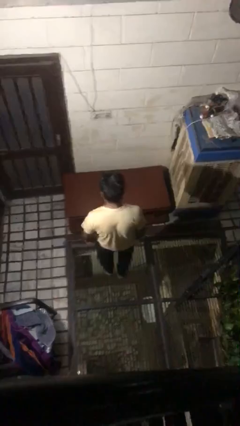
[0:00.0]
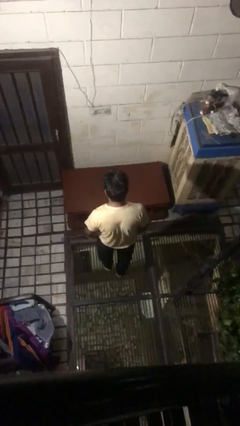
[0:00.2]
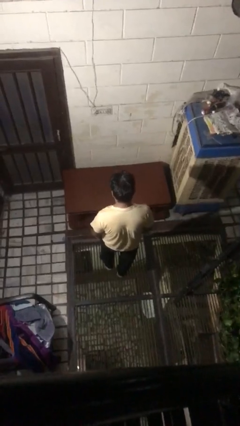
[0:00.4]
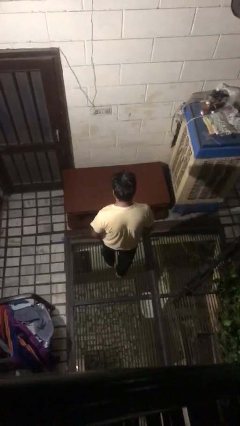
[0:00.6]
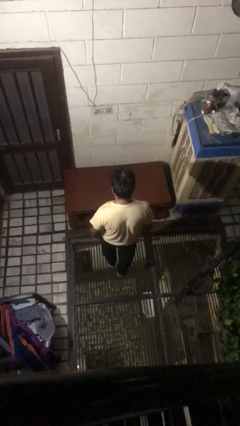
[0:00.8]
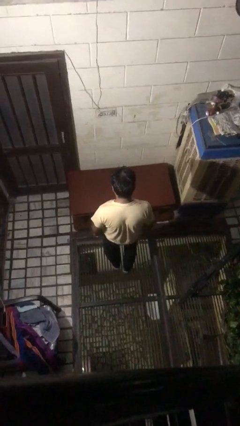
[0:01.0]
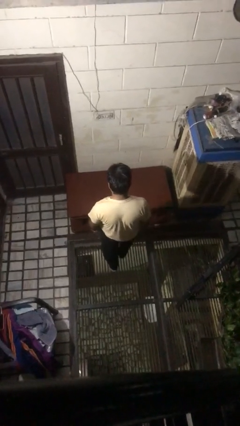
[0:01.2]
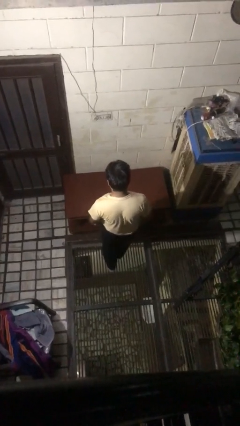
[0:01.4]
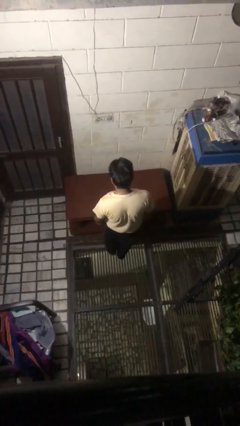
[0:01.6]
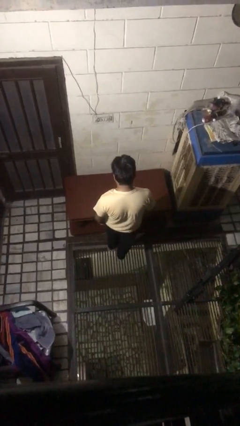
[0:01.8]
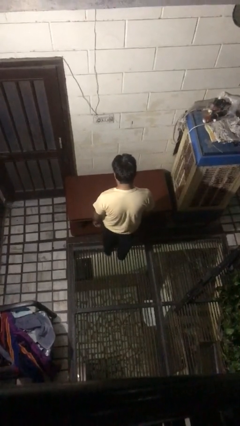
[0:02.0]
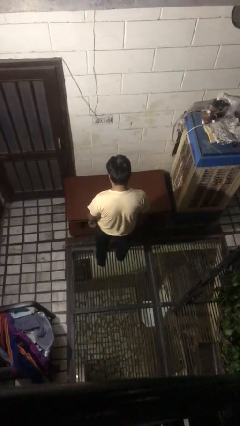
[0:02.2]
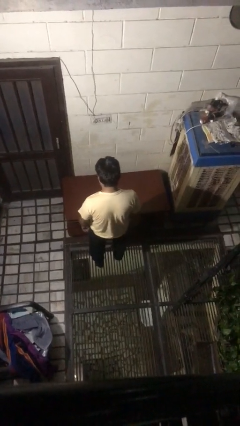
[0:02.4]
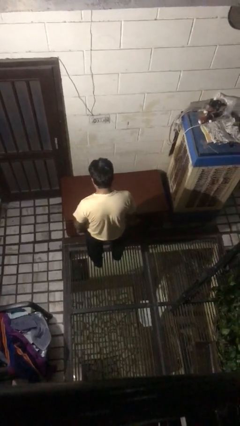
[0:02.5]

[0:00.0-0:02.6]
person bumps into table

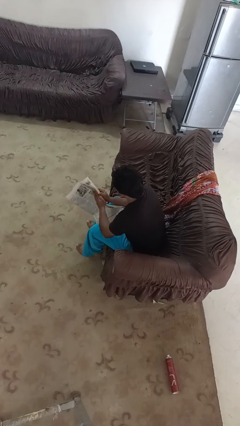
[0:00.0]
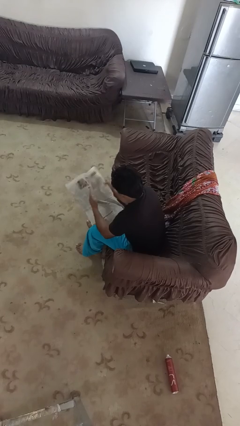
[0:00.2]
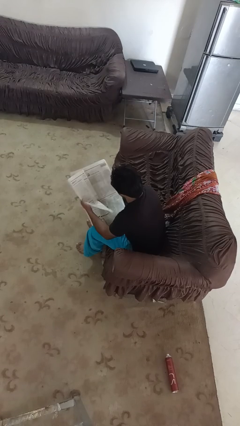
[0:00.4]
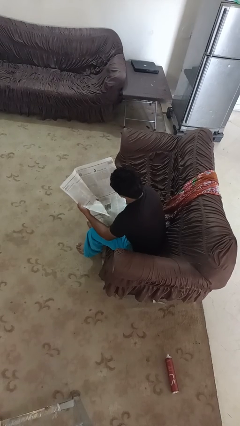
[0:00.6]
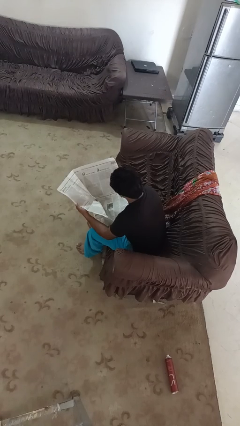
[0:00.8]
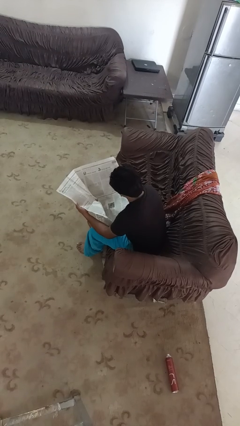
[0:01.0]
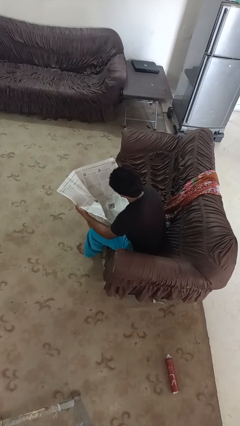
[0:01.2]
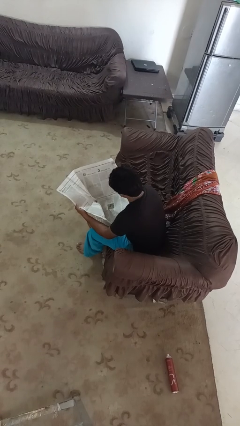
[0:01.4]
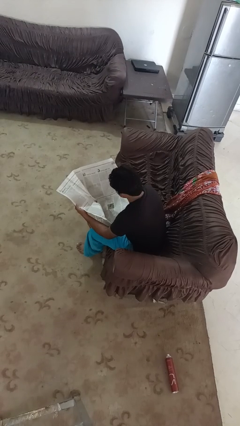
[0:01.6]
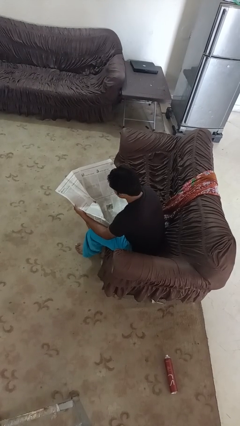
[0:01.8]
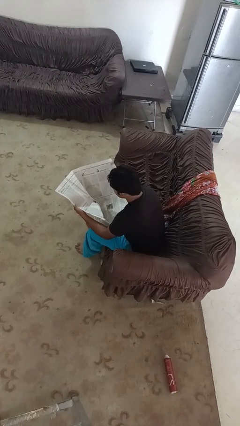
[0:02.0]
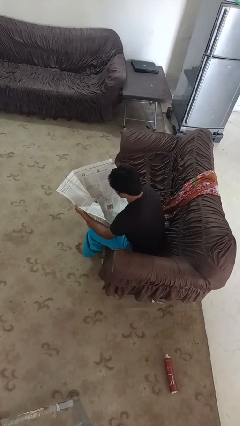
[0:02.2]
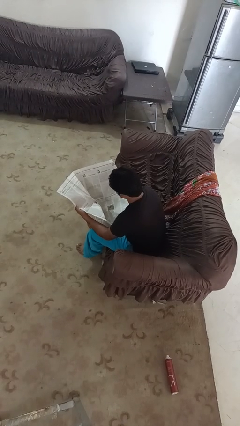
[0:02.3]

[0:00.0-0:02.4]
person reads newspaper

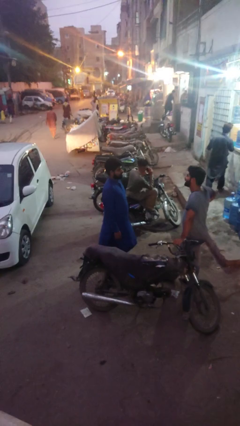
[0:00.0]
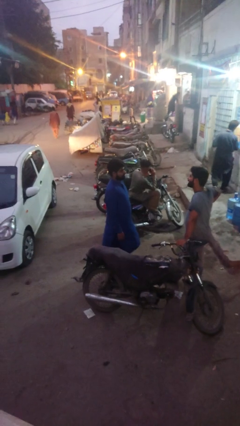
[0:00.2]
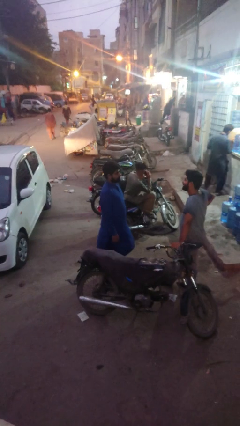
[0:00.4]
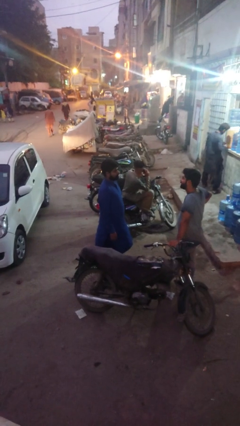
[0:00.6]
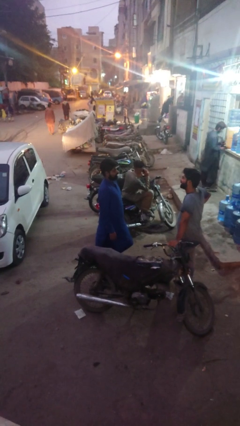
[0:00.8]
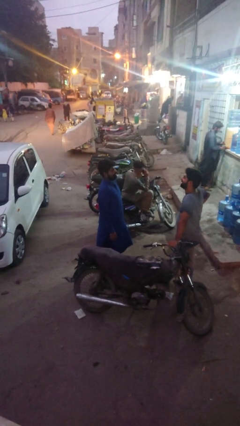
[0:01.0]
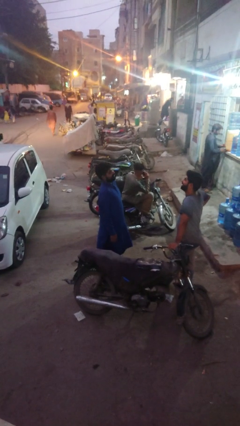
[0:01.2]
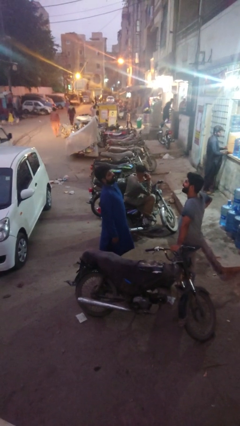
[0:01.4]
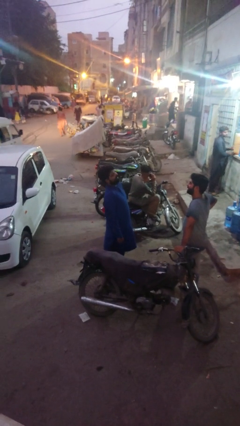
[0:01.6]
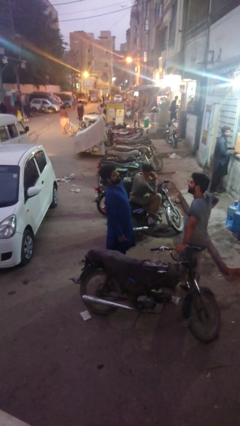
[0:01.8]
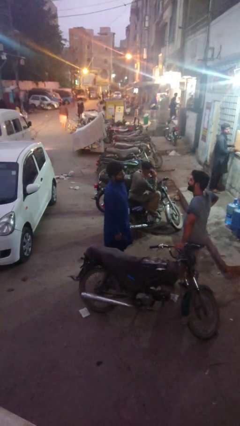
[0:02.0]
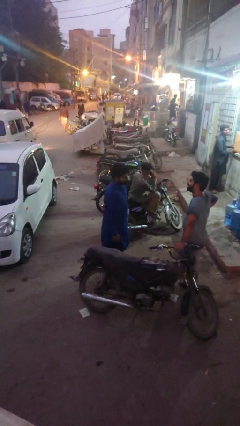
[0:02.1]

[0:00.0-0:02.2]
person laughs with person

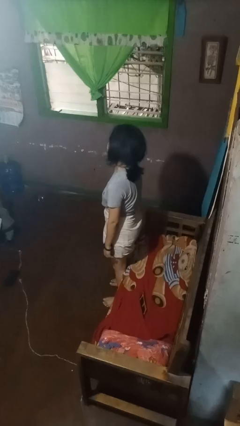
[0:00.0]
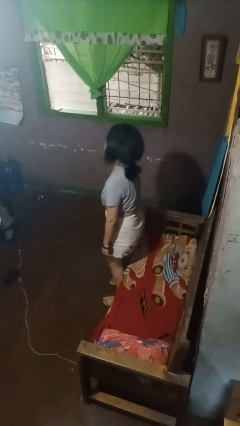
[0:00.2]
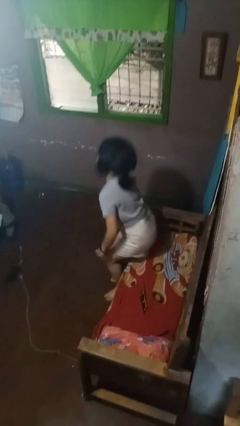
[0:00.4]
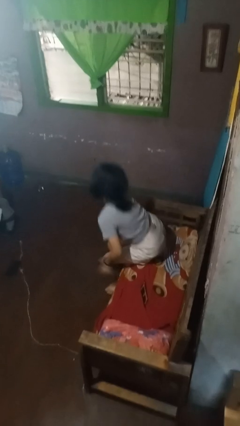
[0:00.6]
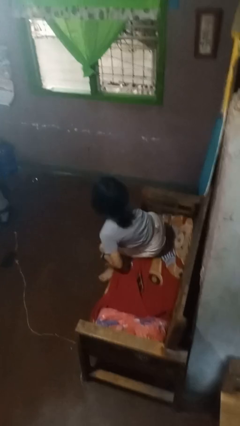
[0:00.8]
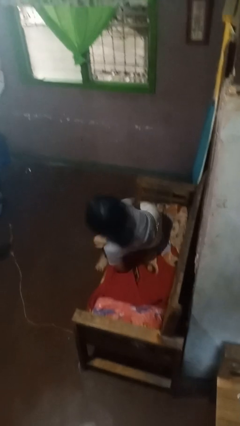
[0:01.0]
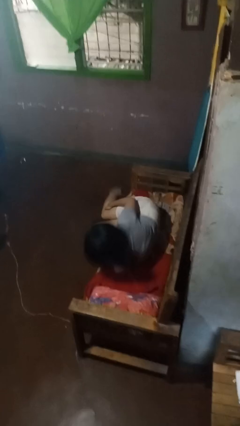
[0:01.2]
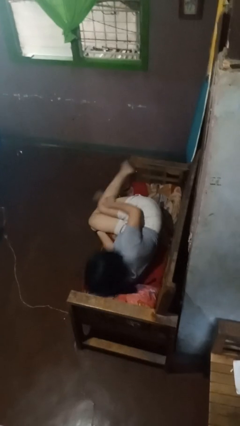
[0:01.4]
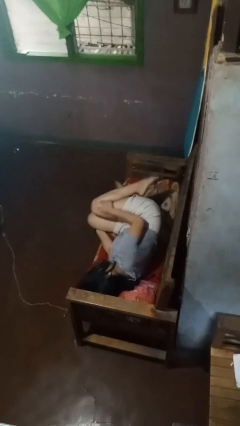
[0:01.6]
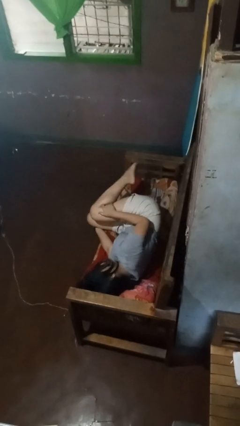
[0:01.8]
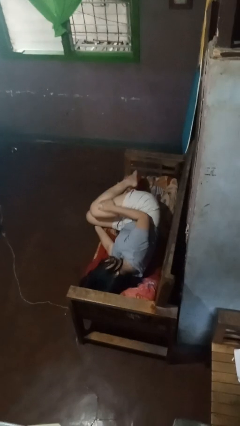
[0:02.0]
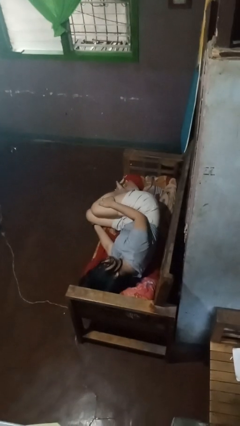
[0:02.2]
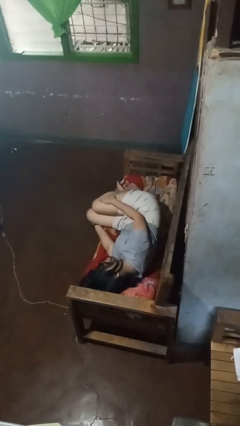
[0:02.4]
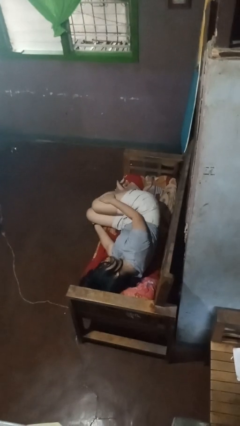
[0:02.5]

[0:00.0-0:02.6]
person lies down on bed

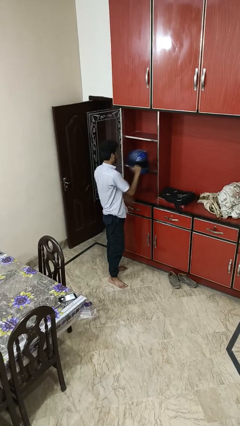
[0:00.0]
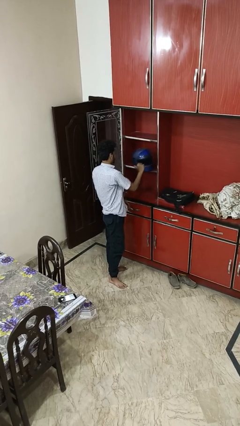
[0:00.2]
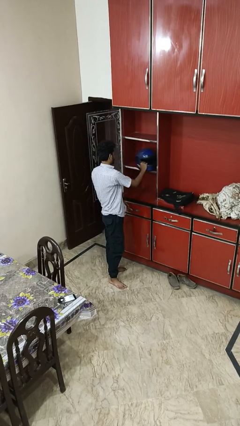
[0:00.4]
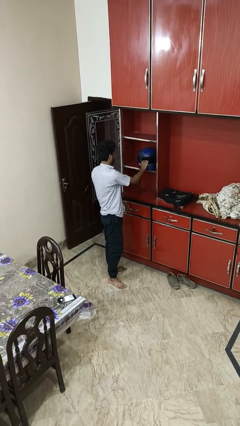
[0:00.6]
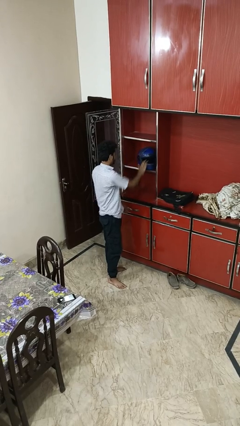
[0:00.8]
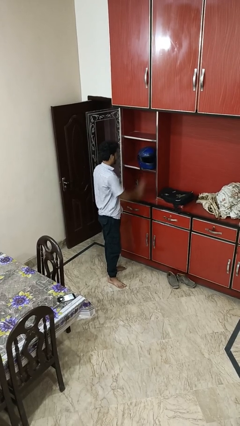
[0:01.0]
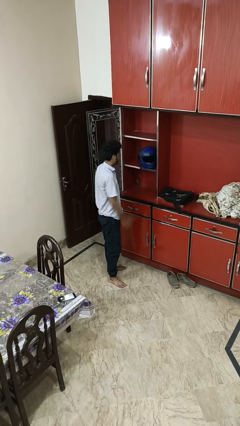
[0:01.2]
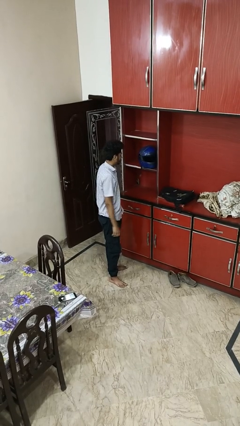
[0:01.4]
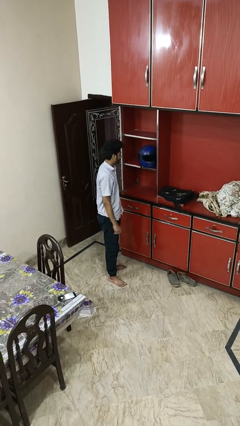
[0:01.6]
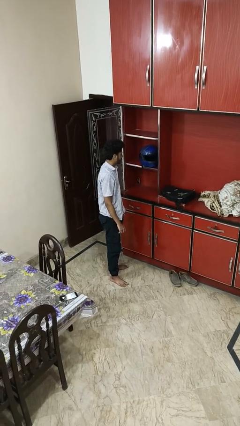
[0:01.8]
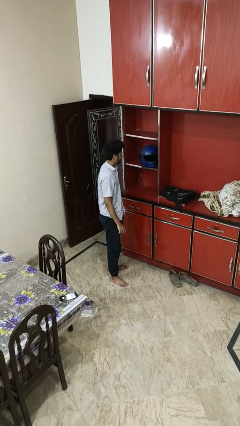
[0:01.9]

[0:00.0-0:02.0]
person puts down object on shelf

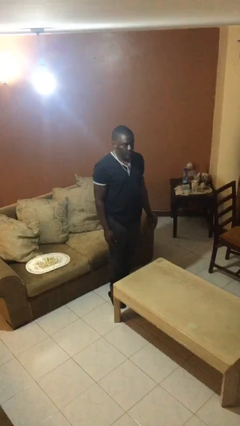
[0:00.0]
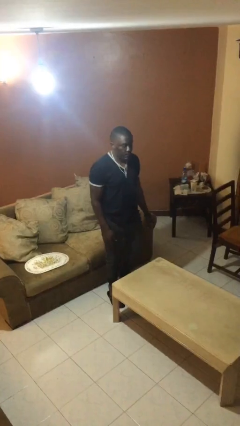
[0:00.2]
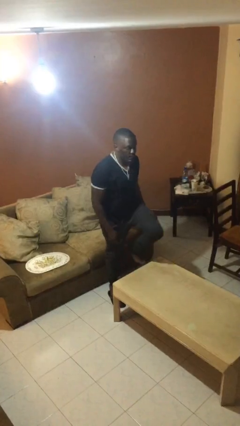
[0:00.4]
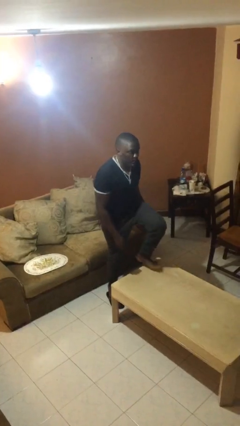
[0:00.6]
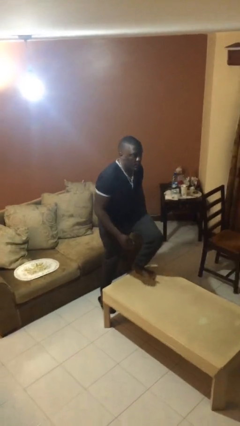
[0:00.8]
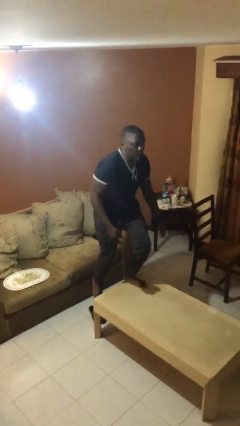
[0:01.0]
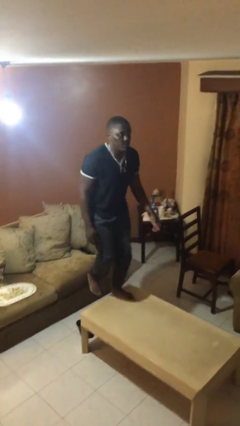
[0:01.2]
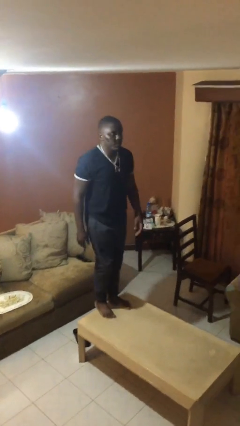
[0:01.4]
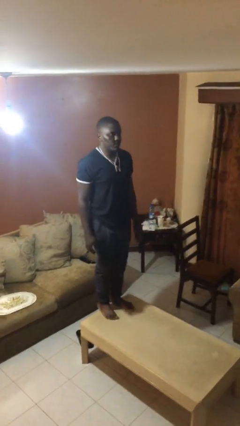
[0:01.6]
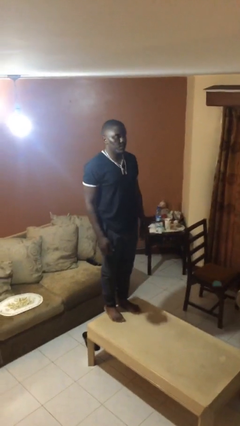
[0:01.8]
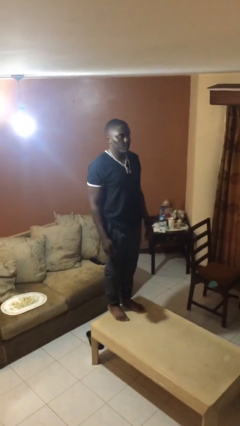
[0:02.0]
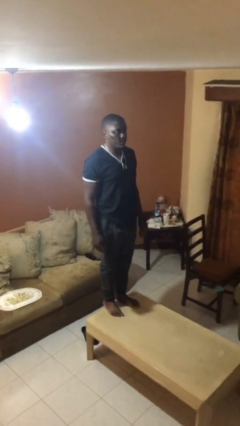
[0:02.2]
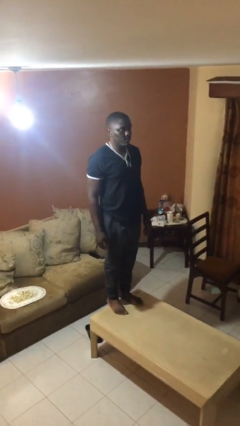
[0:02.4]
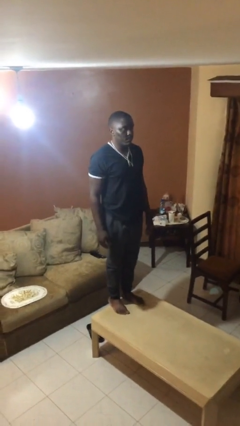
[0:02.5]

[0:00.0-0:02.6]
person climbs on table

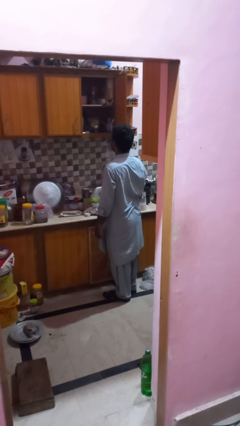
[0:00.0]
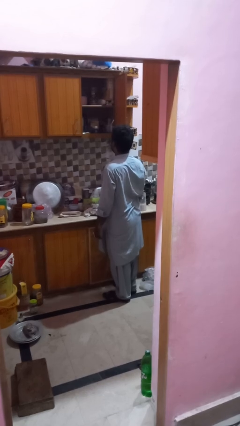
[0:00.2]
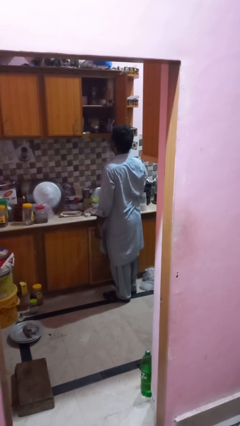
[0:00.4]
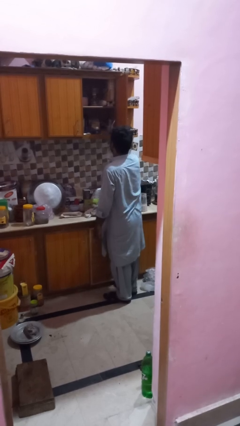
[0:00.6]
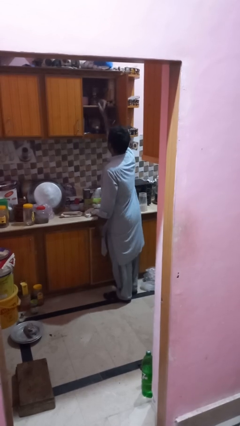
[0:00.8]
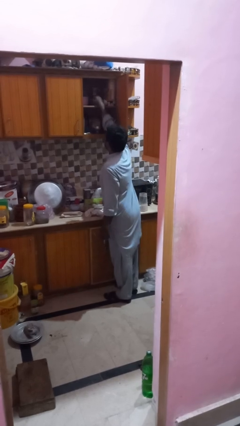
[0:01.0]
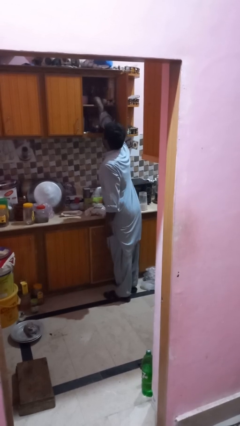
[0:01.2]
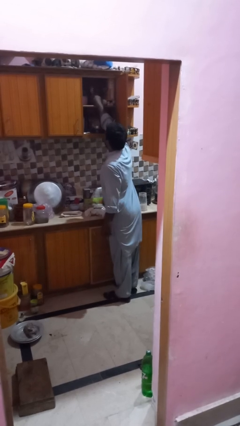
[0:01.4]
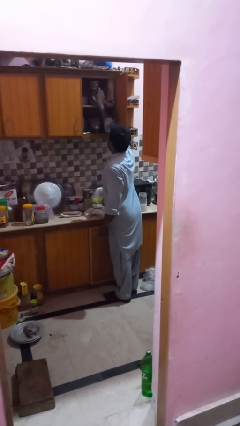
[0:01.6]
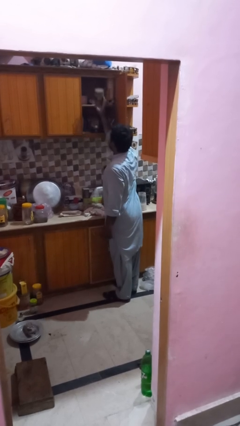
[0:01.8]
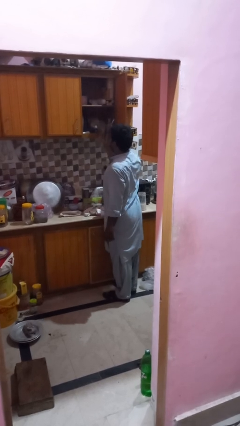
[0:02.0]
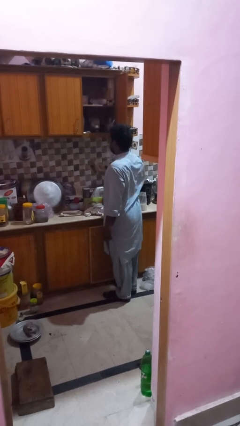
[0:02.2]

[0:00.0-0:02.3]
person takes object from cabinet
